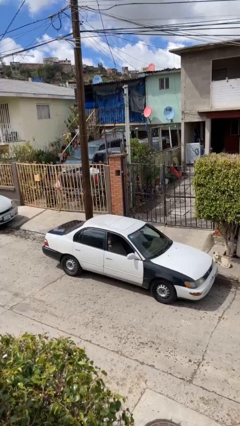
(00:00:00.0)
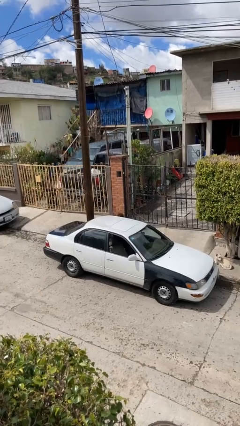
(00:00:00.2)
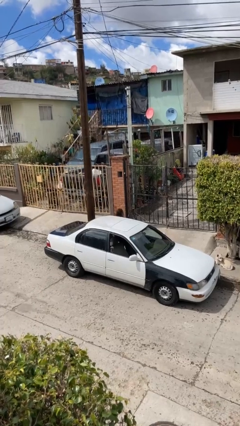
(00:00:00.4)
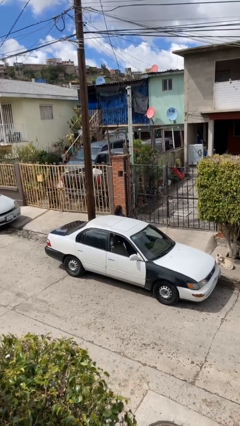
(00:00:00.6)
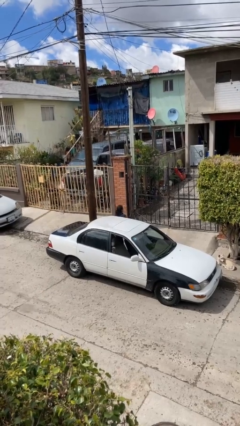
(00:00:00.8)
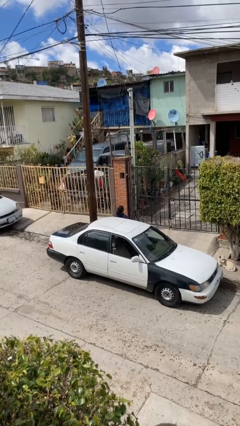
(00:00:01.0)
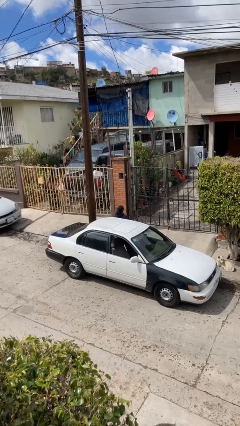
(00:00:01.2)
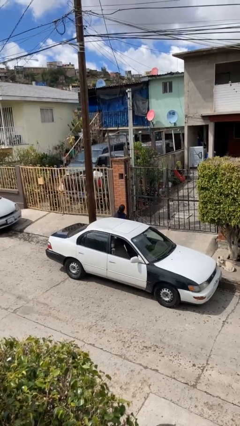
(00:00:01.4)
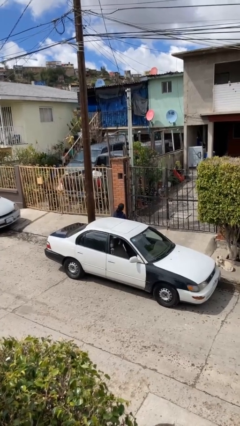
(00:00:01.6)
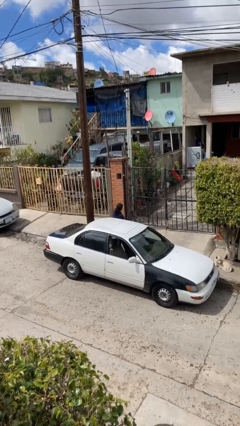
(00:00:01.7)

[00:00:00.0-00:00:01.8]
person exits car

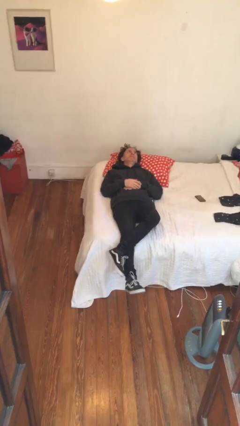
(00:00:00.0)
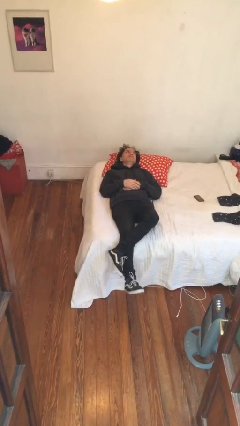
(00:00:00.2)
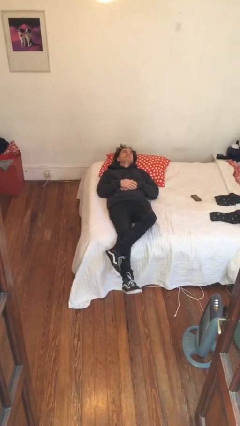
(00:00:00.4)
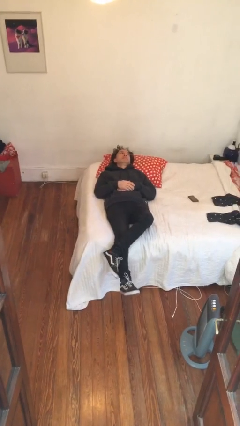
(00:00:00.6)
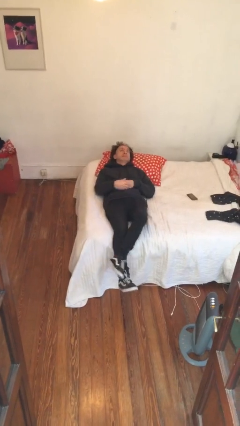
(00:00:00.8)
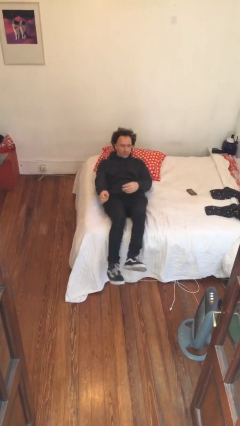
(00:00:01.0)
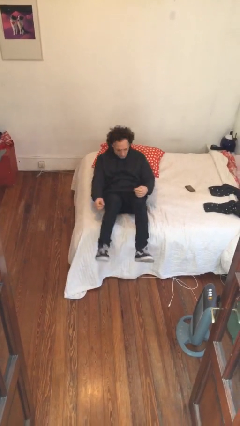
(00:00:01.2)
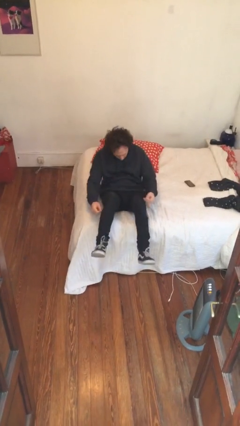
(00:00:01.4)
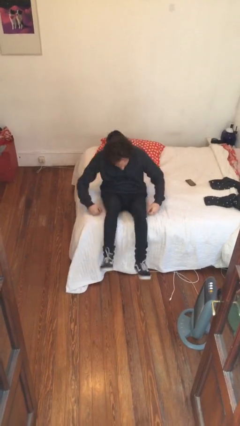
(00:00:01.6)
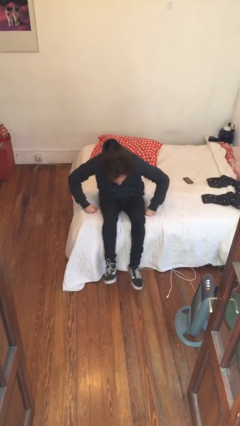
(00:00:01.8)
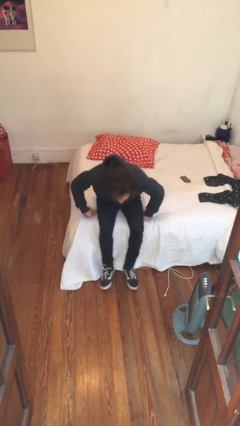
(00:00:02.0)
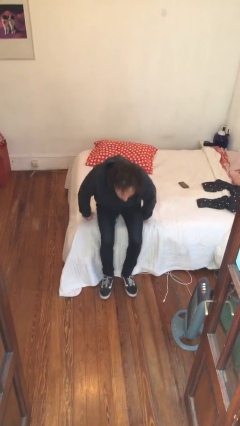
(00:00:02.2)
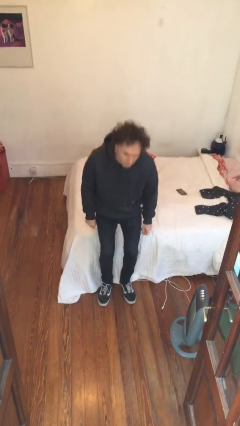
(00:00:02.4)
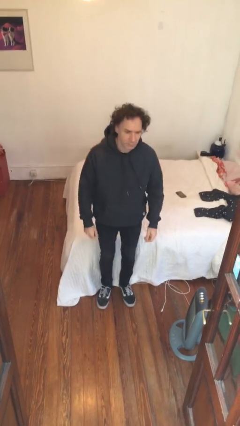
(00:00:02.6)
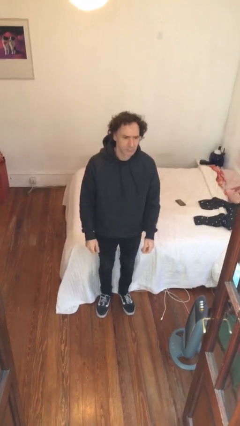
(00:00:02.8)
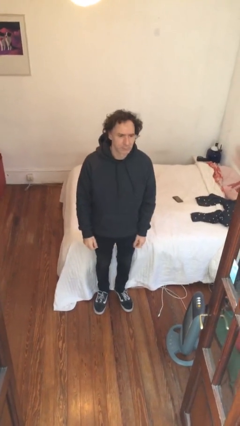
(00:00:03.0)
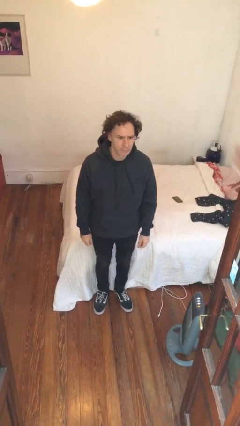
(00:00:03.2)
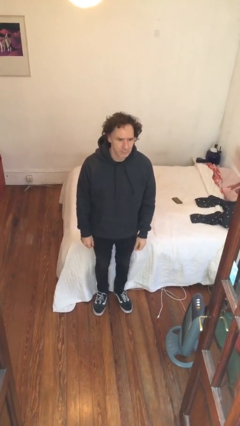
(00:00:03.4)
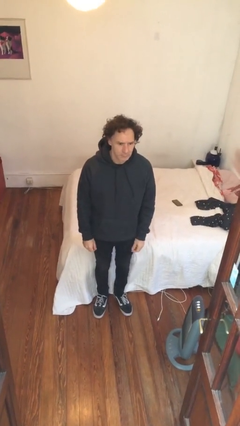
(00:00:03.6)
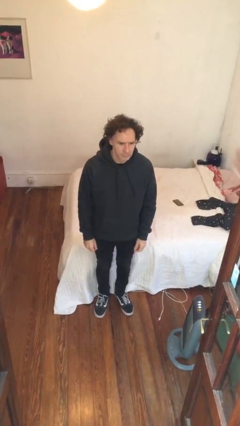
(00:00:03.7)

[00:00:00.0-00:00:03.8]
person stands up

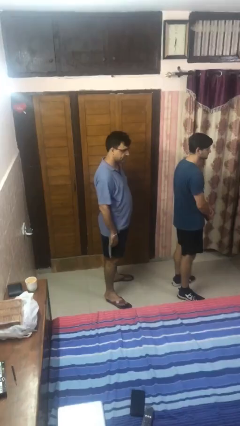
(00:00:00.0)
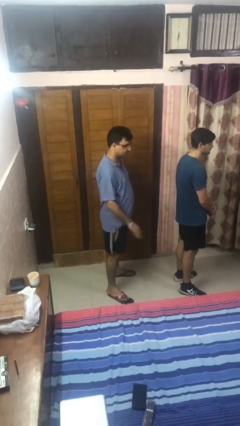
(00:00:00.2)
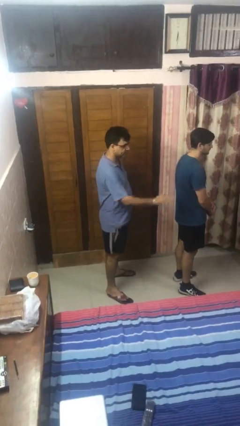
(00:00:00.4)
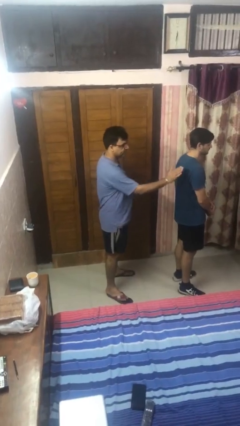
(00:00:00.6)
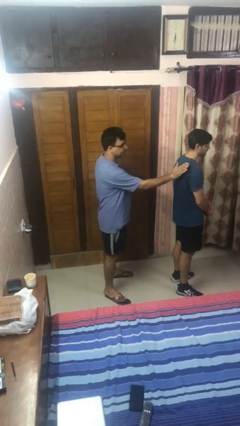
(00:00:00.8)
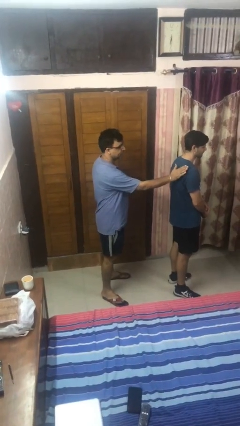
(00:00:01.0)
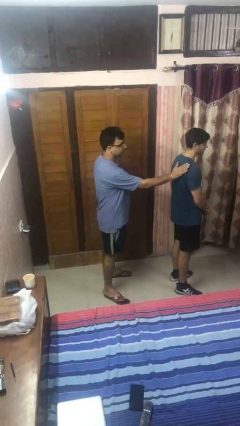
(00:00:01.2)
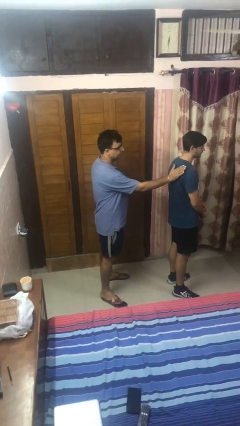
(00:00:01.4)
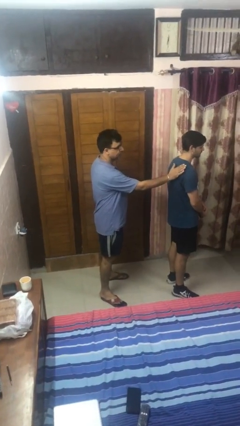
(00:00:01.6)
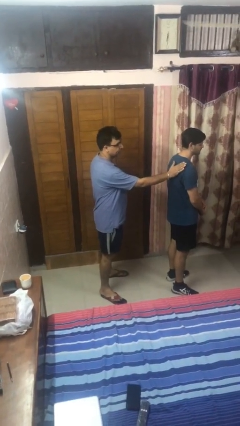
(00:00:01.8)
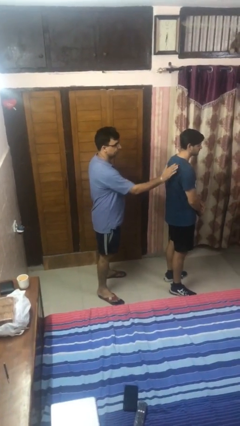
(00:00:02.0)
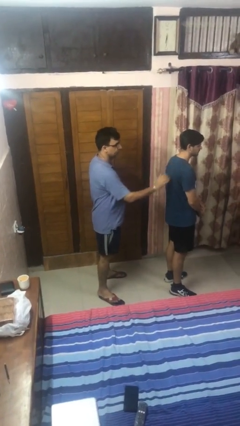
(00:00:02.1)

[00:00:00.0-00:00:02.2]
person touches back of person

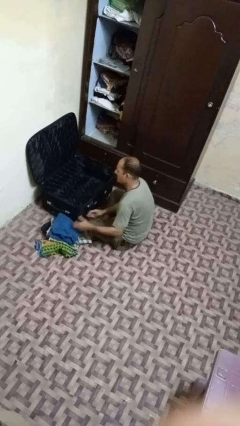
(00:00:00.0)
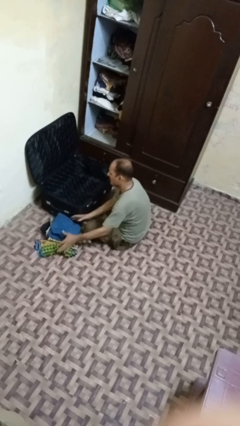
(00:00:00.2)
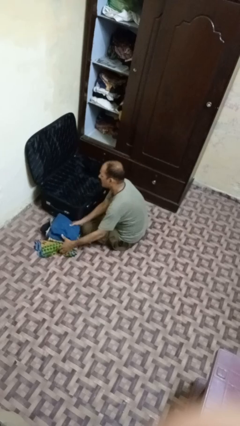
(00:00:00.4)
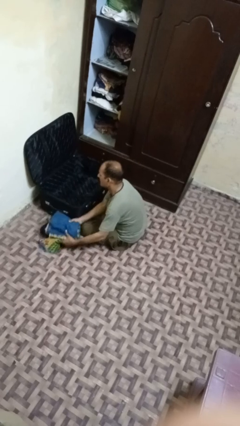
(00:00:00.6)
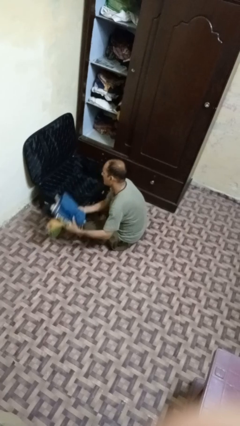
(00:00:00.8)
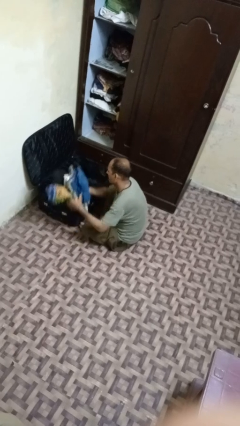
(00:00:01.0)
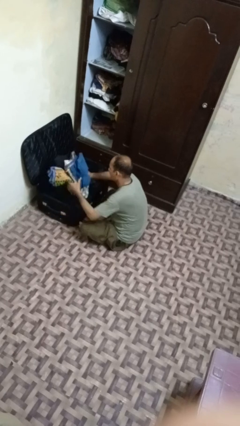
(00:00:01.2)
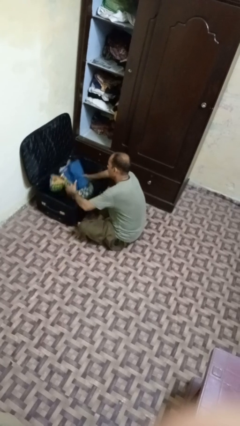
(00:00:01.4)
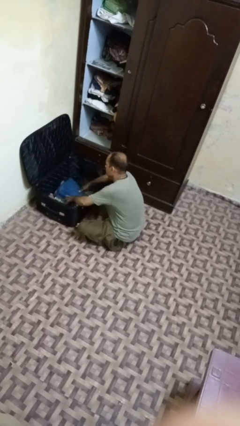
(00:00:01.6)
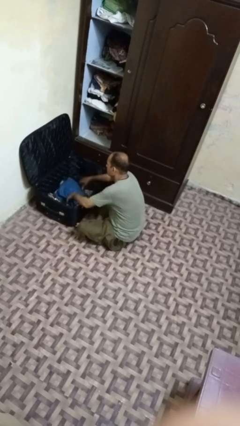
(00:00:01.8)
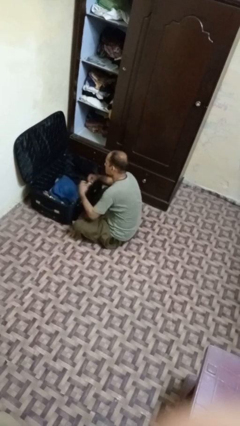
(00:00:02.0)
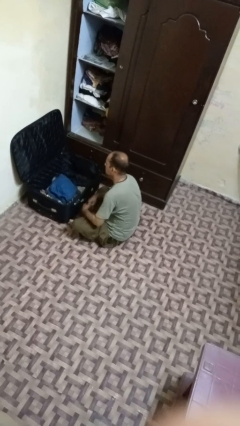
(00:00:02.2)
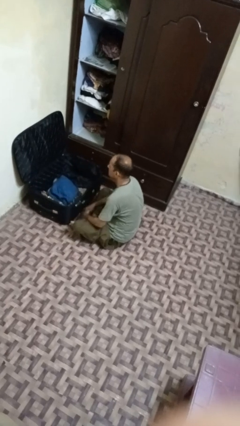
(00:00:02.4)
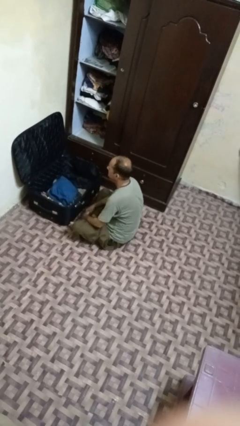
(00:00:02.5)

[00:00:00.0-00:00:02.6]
person loads clothes into suitcase

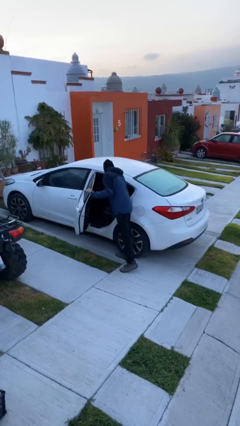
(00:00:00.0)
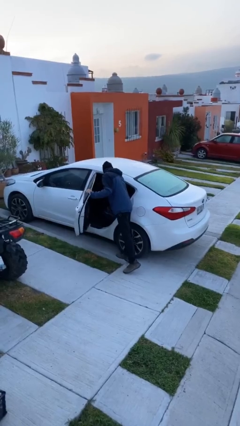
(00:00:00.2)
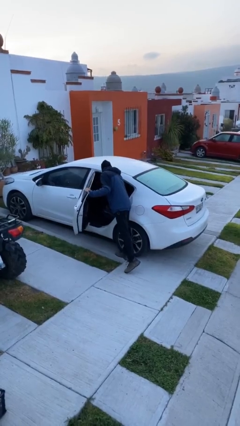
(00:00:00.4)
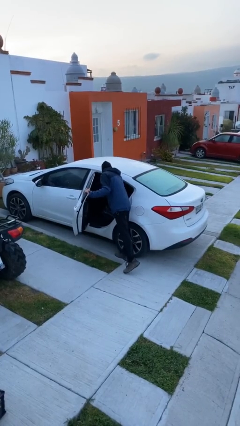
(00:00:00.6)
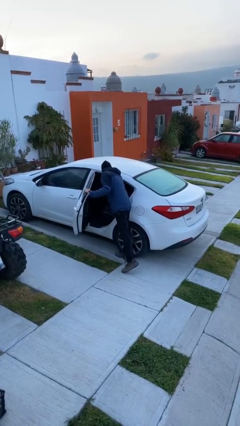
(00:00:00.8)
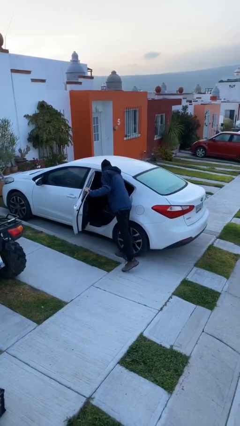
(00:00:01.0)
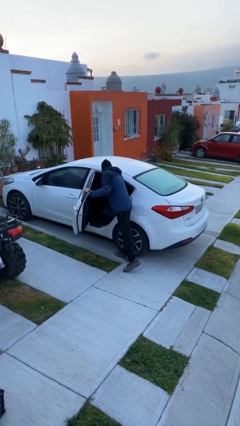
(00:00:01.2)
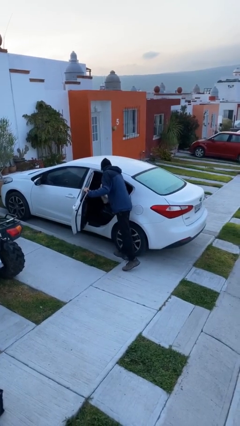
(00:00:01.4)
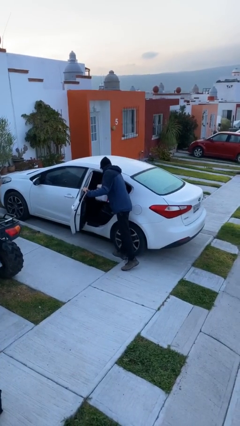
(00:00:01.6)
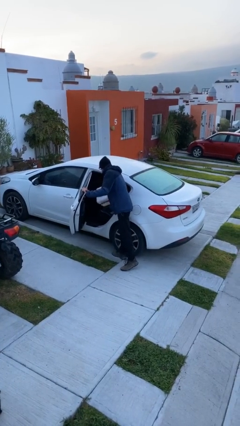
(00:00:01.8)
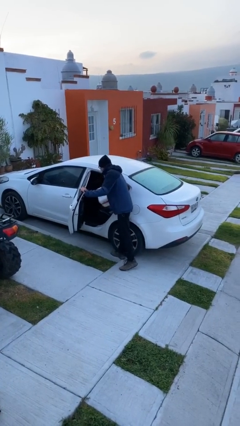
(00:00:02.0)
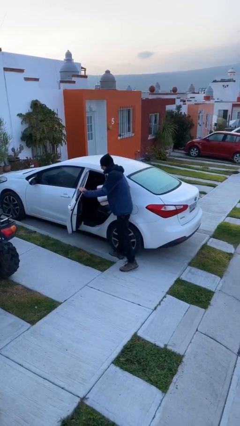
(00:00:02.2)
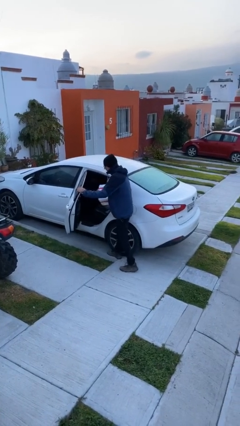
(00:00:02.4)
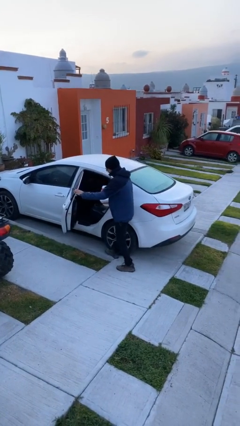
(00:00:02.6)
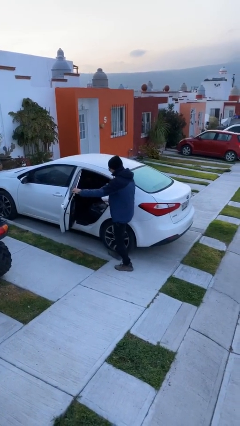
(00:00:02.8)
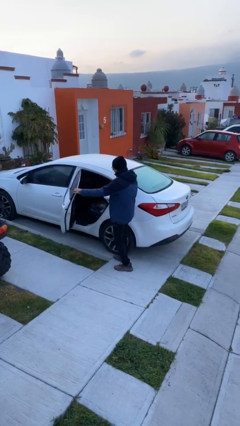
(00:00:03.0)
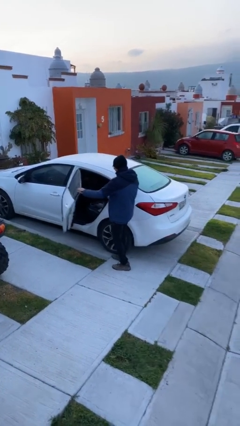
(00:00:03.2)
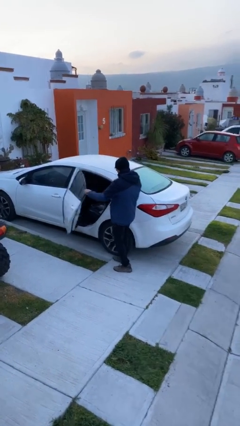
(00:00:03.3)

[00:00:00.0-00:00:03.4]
person unloads car

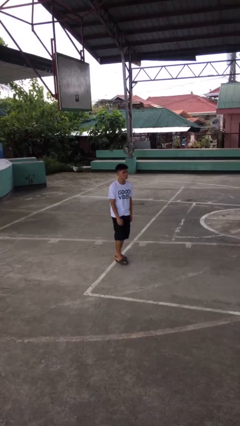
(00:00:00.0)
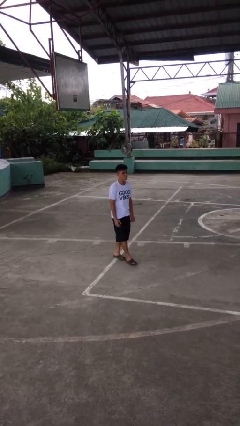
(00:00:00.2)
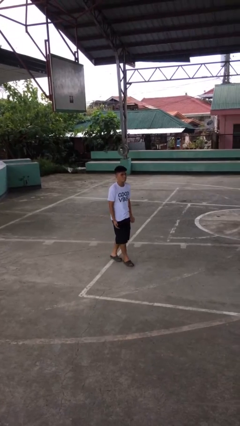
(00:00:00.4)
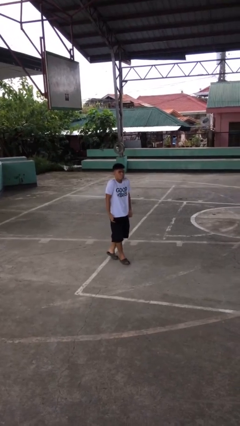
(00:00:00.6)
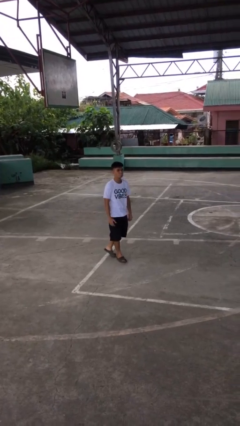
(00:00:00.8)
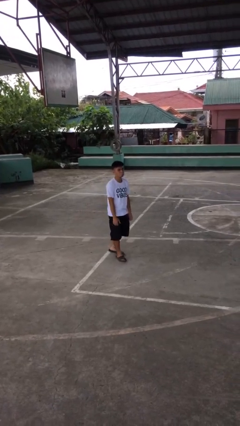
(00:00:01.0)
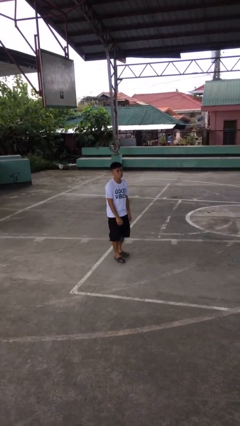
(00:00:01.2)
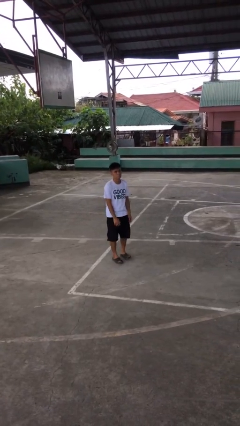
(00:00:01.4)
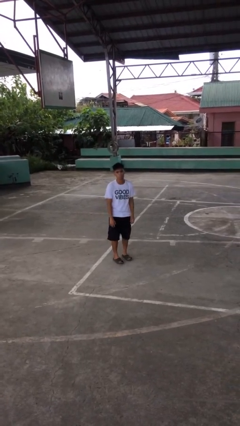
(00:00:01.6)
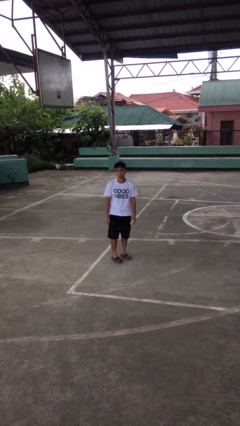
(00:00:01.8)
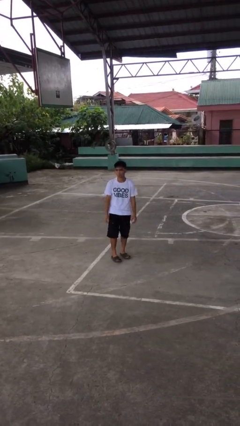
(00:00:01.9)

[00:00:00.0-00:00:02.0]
person shrugs

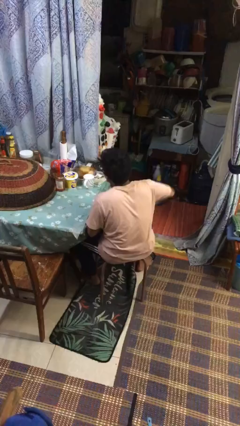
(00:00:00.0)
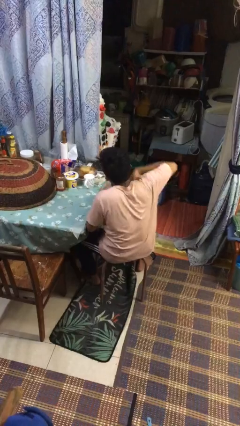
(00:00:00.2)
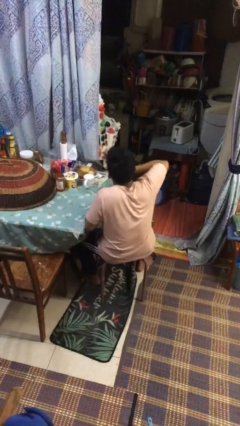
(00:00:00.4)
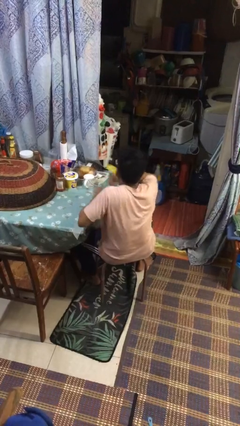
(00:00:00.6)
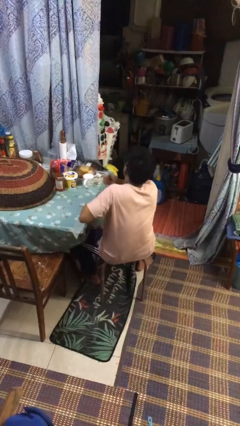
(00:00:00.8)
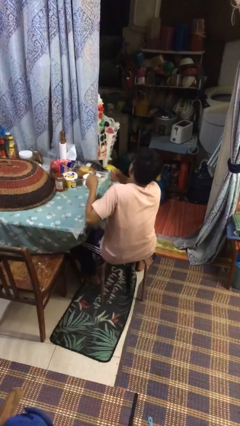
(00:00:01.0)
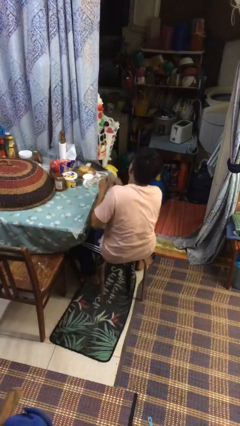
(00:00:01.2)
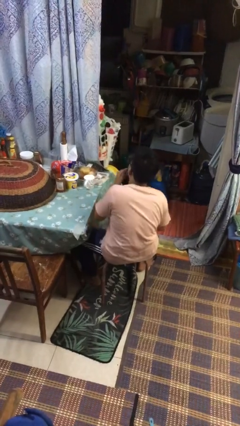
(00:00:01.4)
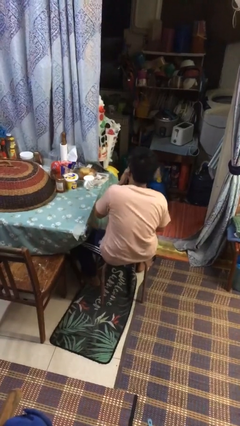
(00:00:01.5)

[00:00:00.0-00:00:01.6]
person drums on chest
